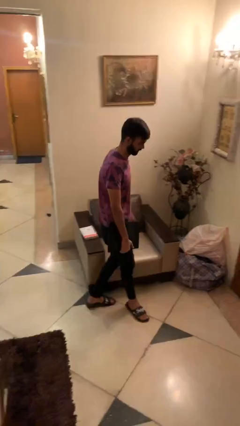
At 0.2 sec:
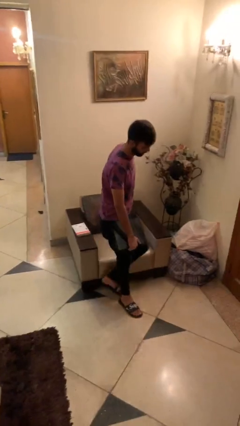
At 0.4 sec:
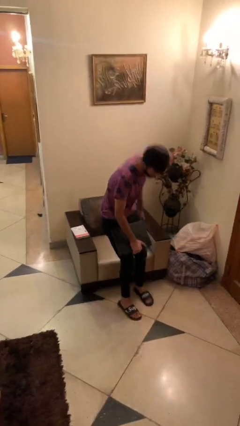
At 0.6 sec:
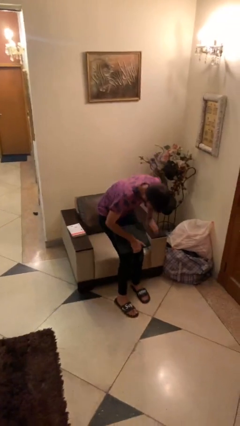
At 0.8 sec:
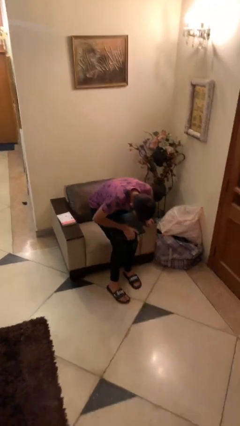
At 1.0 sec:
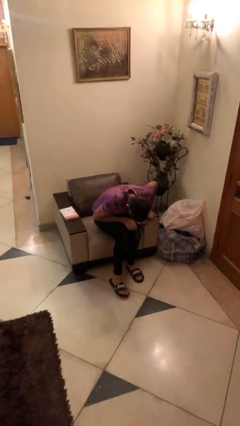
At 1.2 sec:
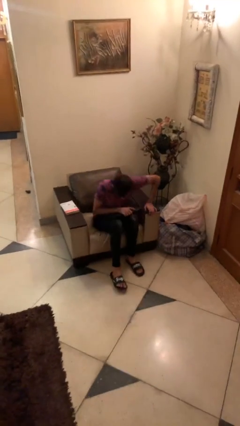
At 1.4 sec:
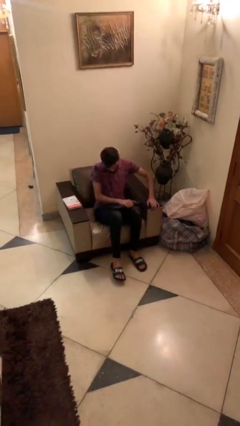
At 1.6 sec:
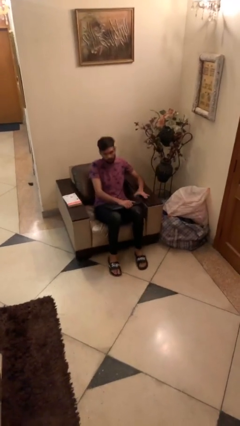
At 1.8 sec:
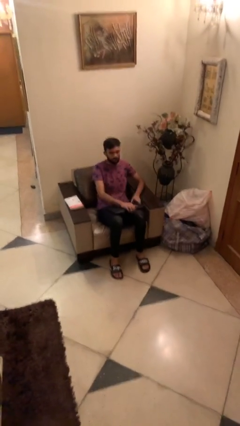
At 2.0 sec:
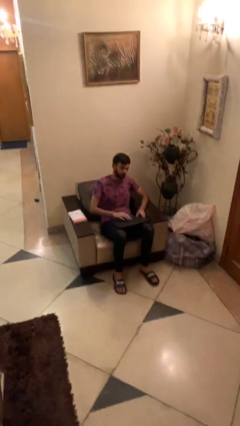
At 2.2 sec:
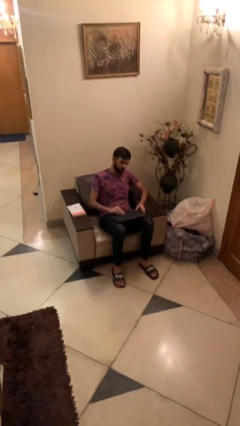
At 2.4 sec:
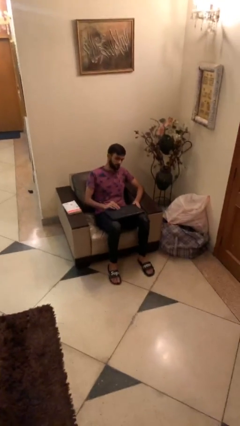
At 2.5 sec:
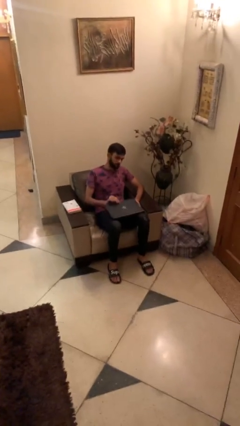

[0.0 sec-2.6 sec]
person sits down

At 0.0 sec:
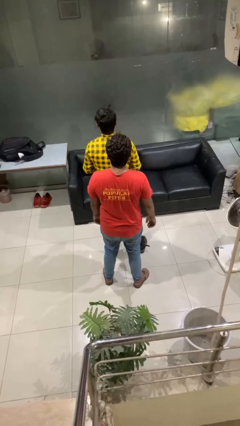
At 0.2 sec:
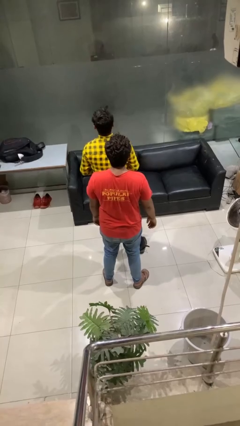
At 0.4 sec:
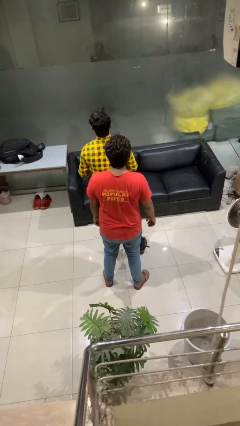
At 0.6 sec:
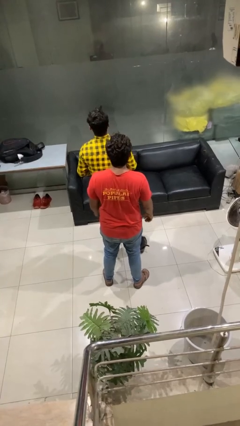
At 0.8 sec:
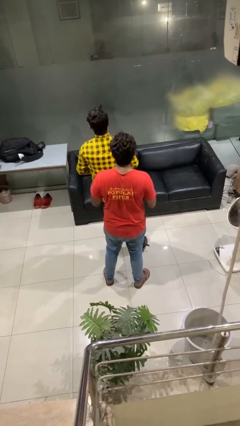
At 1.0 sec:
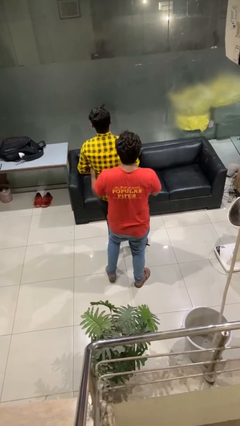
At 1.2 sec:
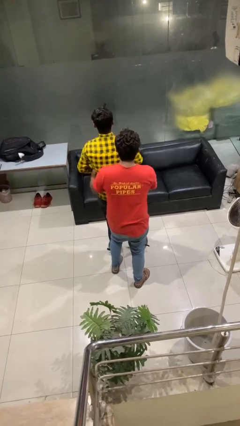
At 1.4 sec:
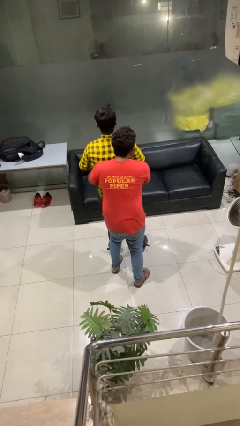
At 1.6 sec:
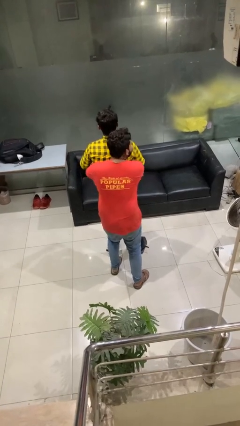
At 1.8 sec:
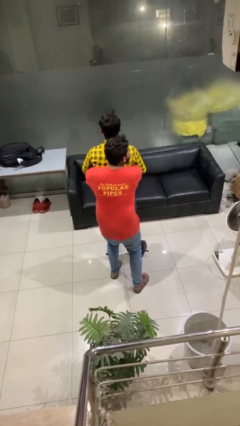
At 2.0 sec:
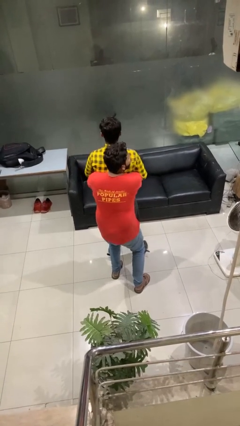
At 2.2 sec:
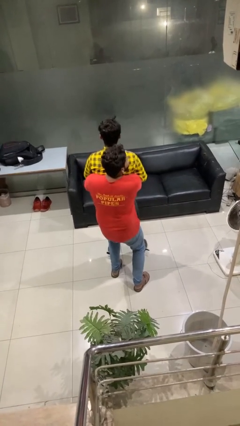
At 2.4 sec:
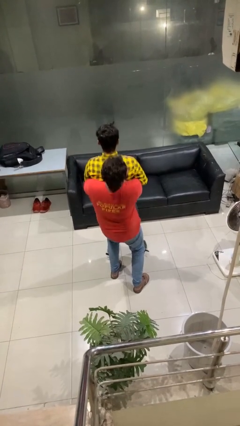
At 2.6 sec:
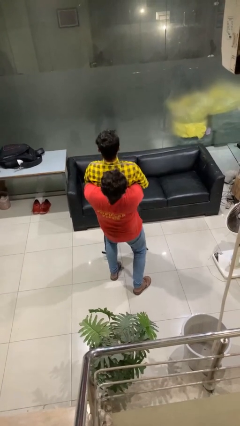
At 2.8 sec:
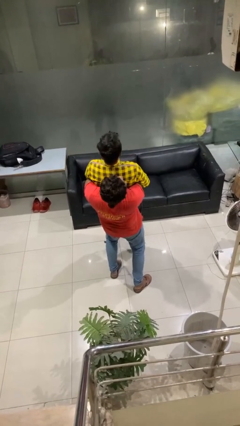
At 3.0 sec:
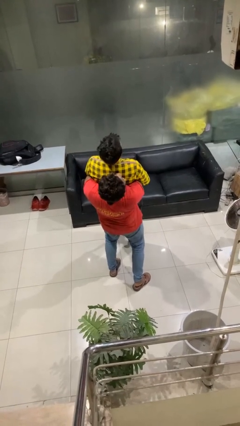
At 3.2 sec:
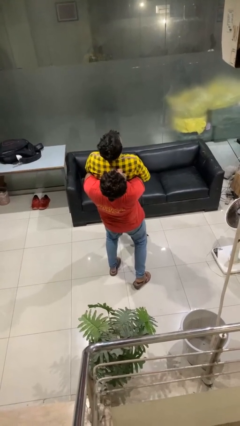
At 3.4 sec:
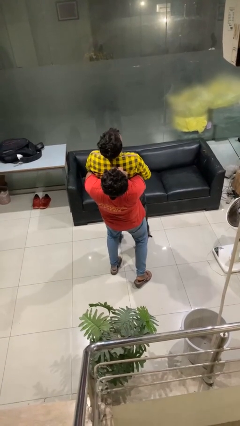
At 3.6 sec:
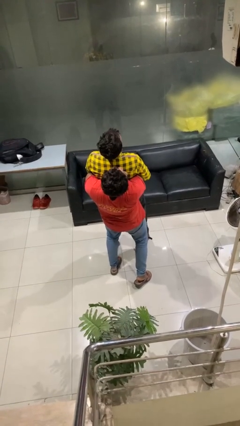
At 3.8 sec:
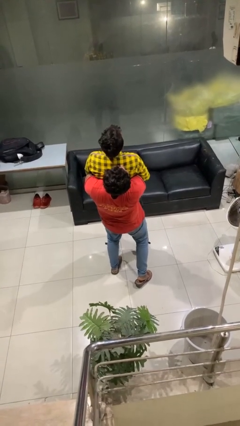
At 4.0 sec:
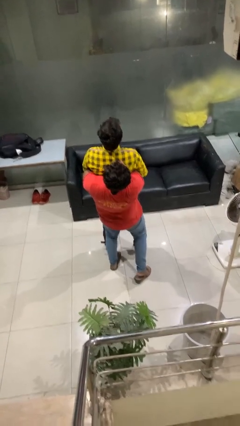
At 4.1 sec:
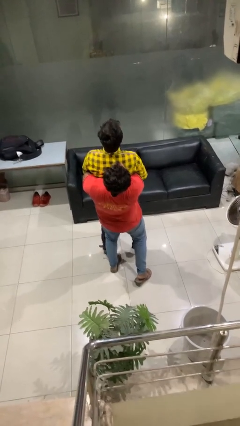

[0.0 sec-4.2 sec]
person picks up person

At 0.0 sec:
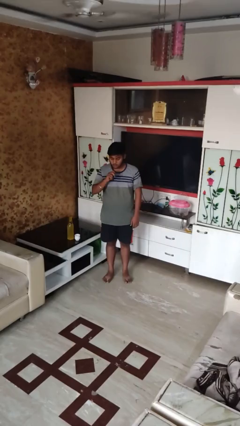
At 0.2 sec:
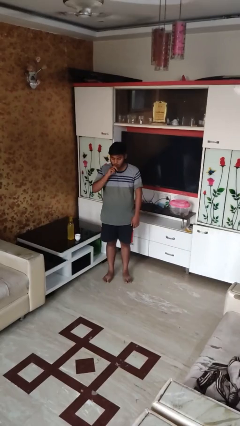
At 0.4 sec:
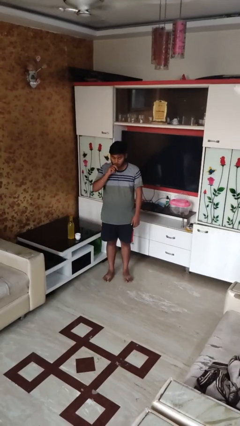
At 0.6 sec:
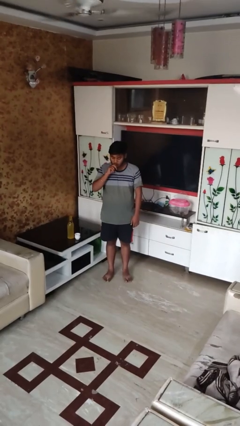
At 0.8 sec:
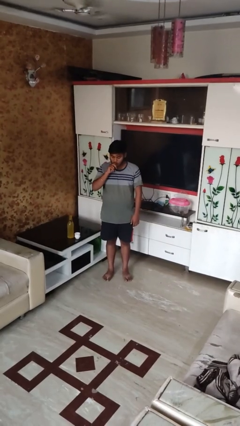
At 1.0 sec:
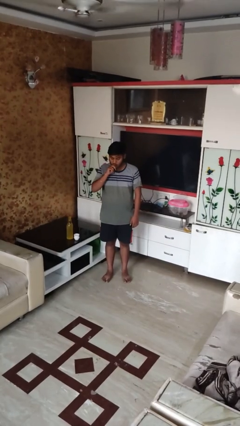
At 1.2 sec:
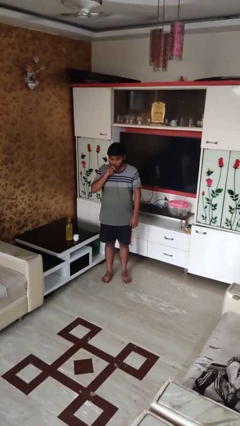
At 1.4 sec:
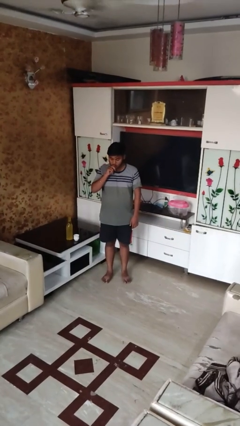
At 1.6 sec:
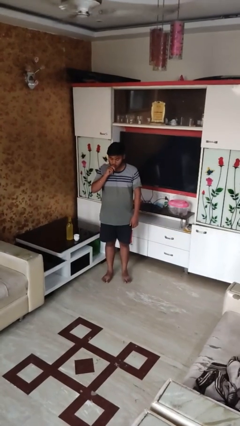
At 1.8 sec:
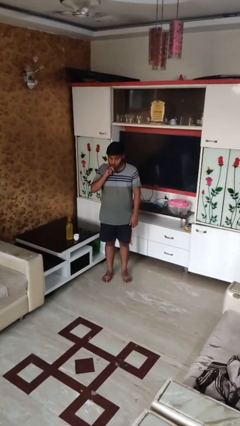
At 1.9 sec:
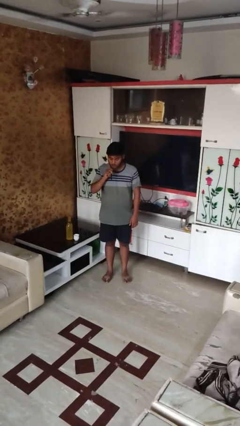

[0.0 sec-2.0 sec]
person vapes

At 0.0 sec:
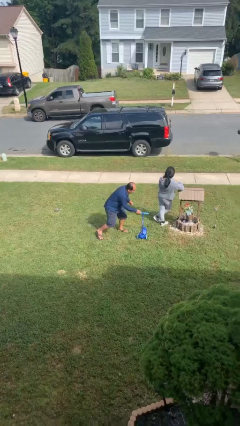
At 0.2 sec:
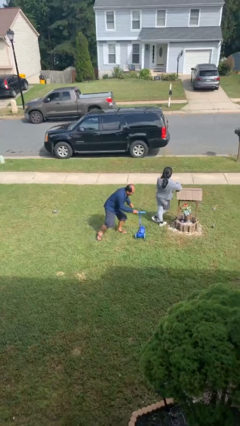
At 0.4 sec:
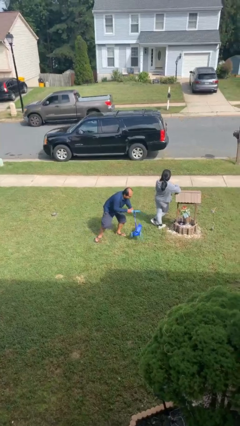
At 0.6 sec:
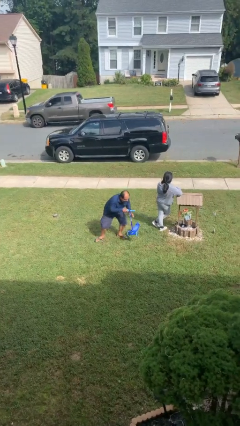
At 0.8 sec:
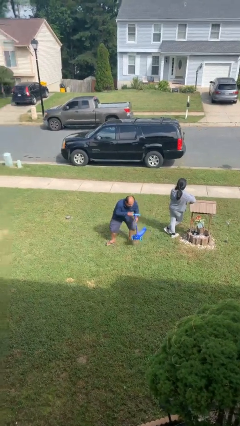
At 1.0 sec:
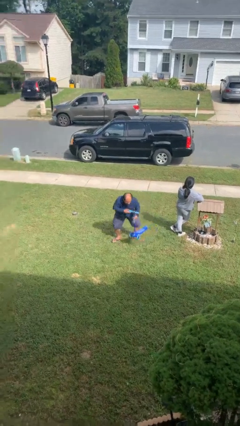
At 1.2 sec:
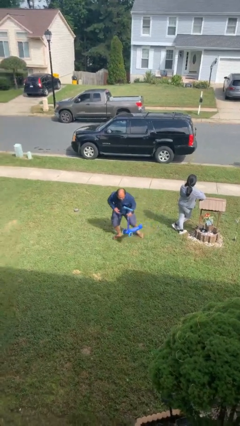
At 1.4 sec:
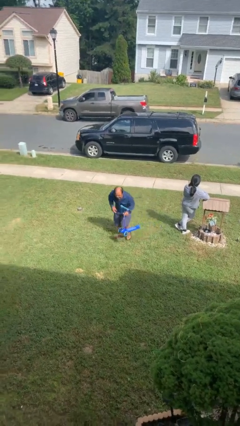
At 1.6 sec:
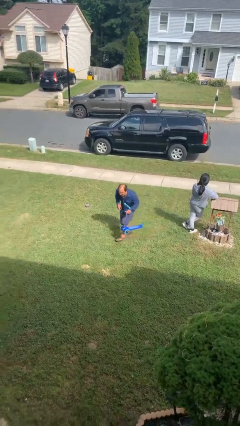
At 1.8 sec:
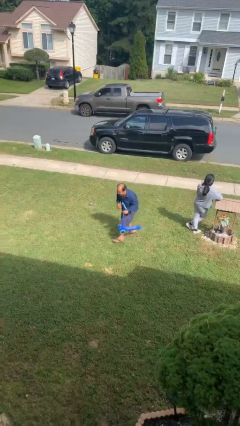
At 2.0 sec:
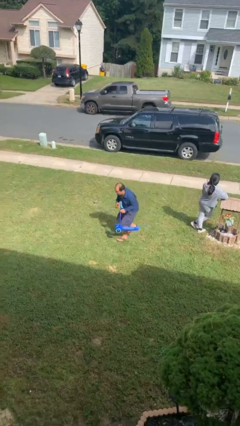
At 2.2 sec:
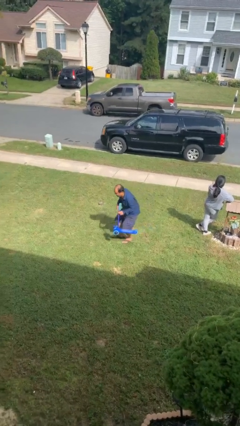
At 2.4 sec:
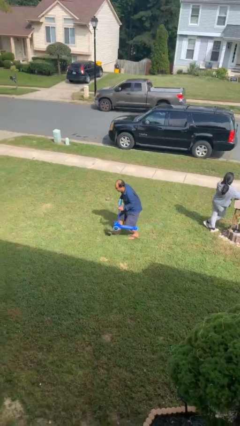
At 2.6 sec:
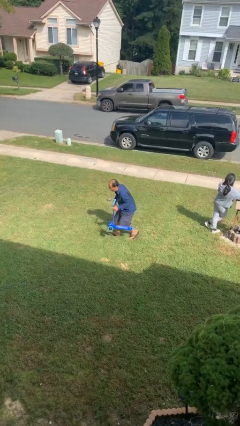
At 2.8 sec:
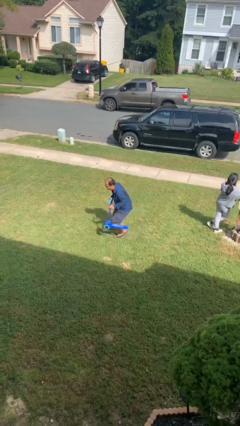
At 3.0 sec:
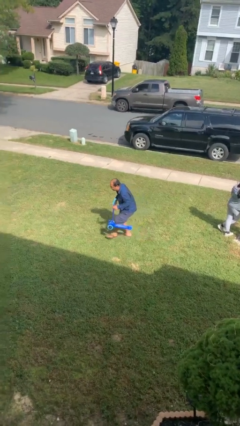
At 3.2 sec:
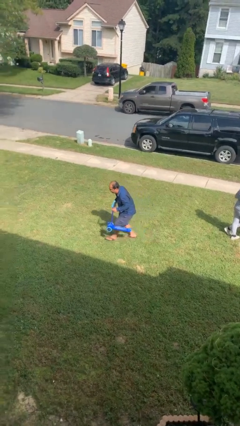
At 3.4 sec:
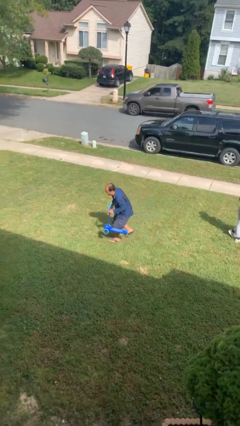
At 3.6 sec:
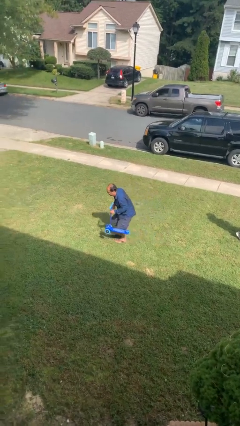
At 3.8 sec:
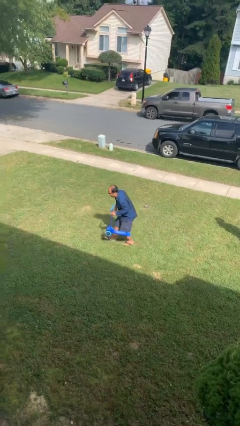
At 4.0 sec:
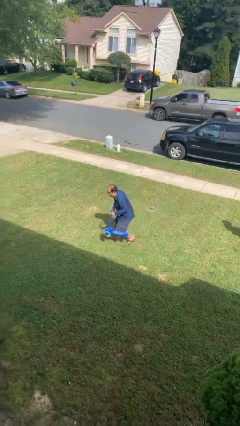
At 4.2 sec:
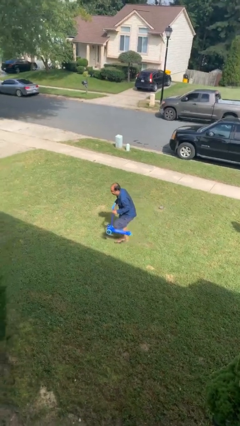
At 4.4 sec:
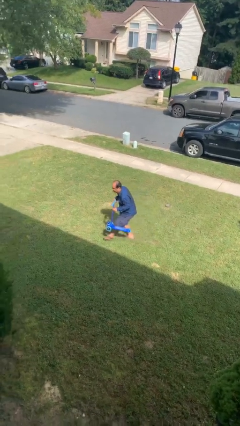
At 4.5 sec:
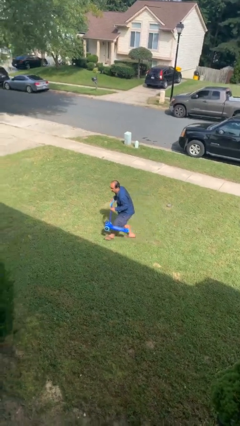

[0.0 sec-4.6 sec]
person steals object from person

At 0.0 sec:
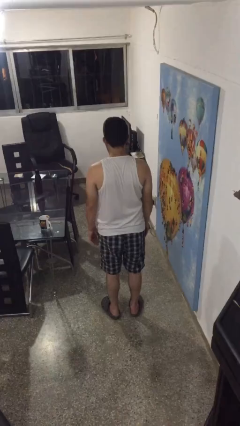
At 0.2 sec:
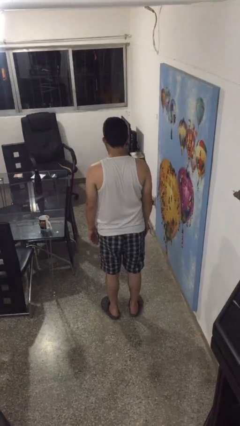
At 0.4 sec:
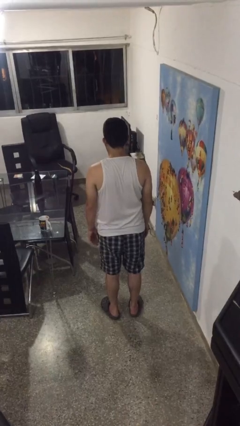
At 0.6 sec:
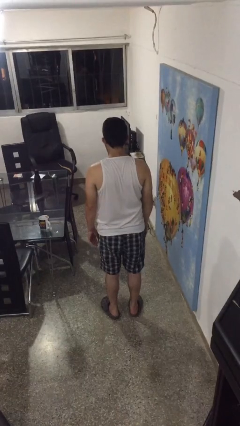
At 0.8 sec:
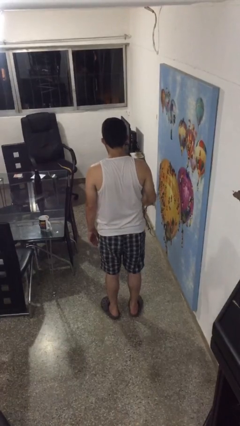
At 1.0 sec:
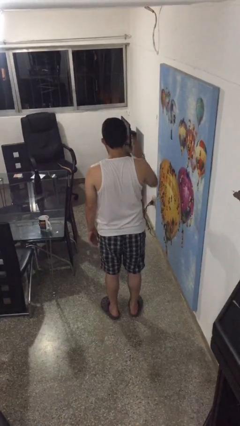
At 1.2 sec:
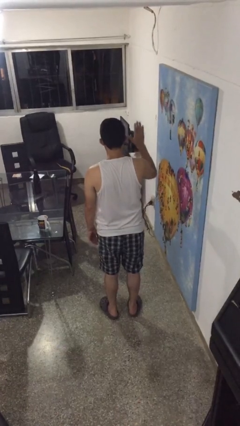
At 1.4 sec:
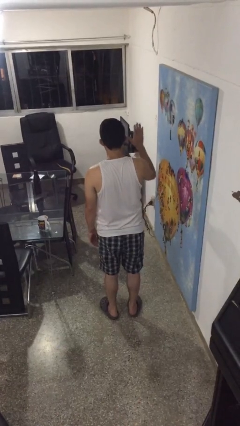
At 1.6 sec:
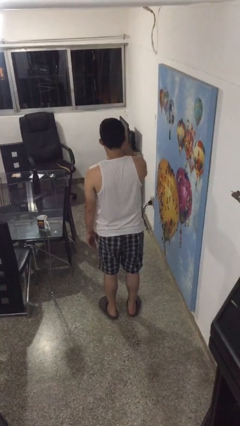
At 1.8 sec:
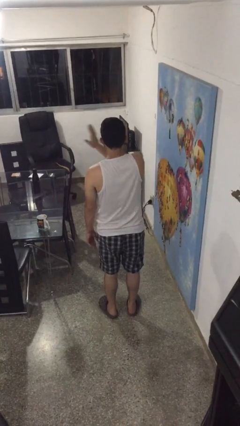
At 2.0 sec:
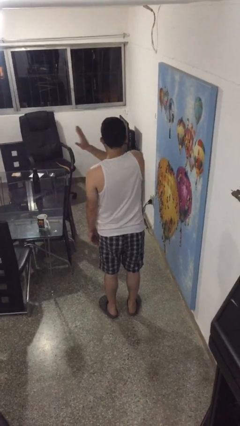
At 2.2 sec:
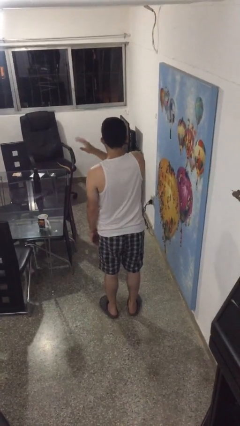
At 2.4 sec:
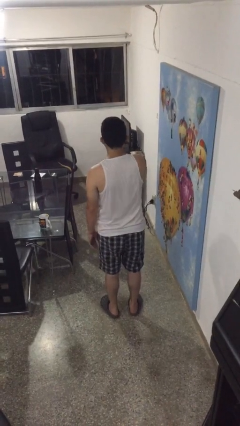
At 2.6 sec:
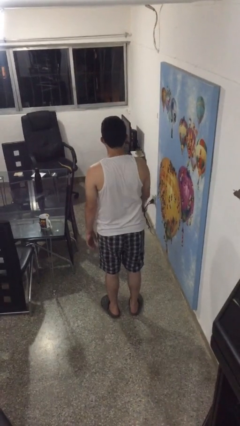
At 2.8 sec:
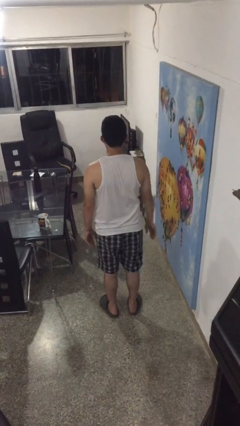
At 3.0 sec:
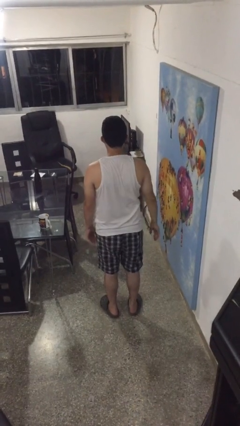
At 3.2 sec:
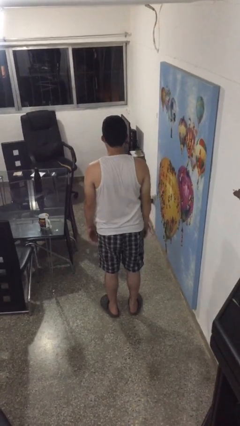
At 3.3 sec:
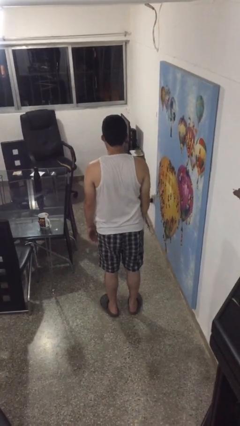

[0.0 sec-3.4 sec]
person gestures swipe left

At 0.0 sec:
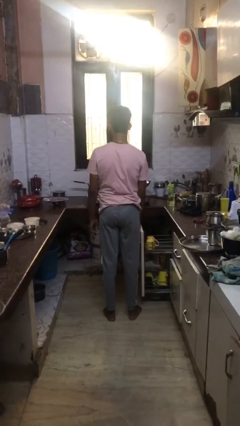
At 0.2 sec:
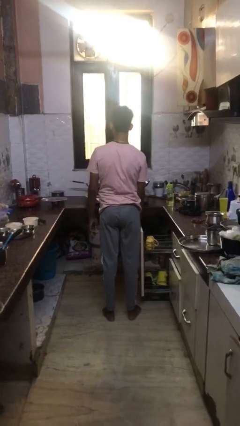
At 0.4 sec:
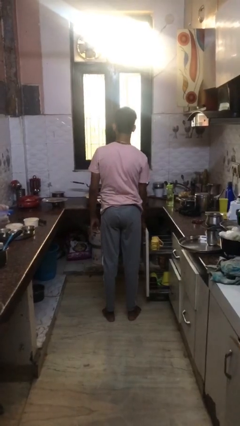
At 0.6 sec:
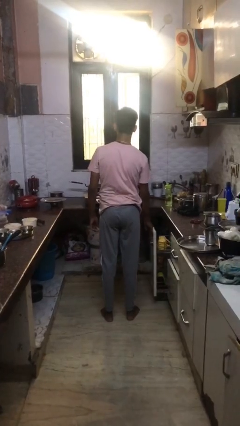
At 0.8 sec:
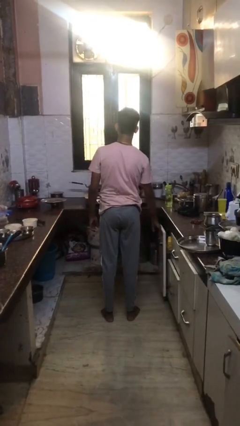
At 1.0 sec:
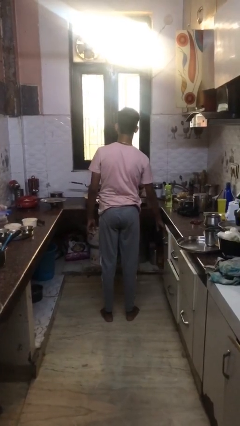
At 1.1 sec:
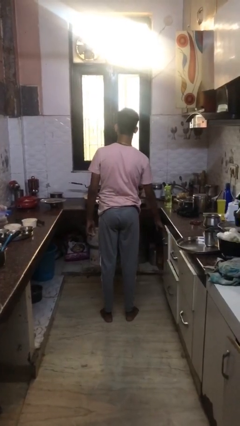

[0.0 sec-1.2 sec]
person closes dishwasher
